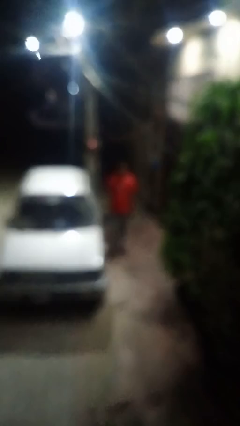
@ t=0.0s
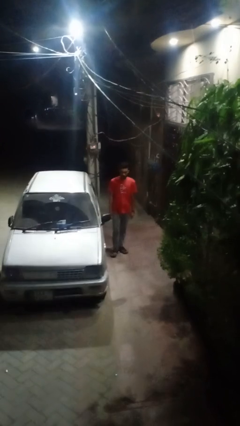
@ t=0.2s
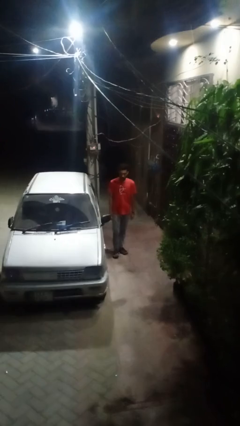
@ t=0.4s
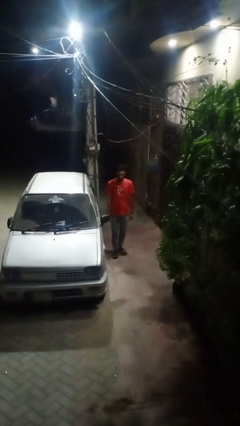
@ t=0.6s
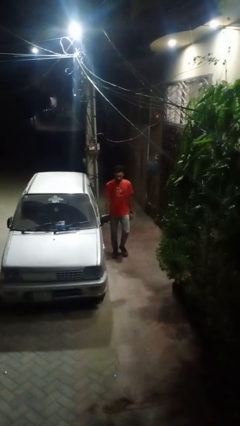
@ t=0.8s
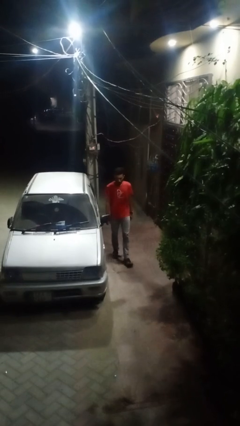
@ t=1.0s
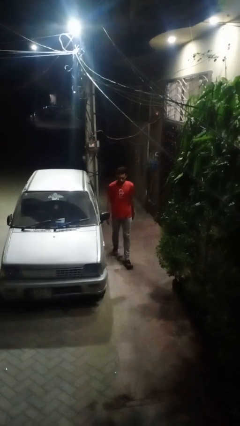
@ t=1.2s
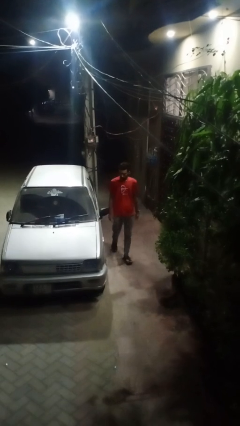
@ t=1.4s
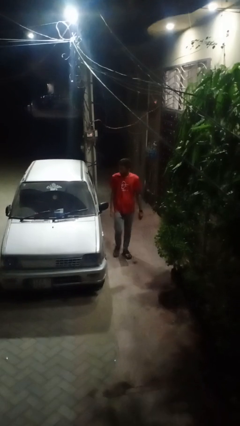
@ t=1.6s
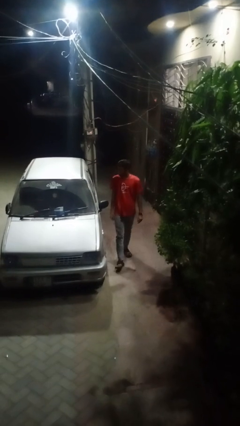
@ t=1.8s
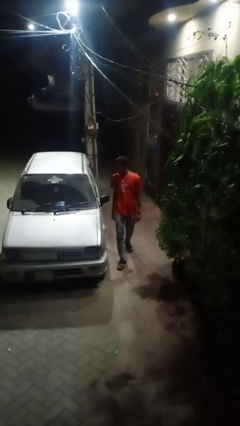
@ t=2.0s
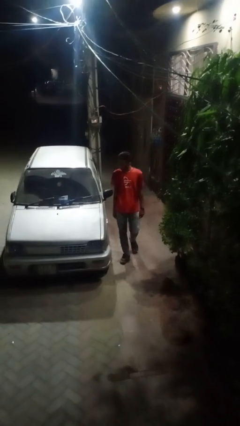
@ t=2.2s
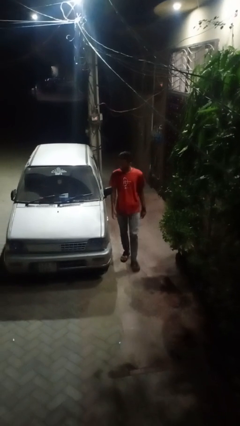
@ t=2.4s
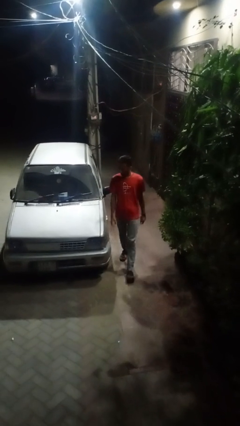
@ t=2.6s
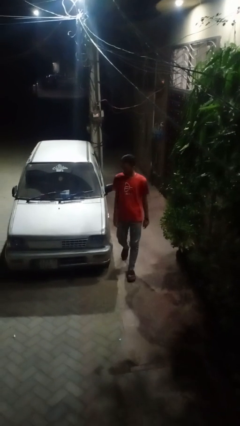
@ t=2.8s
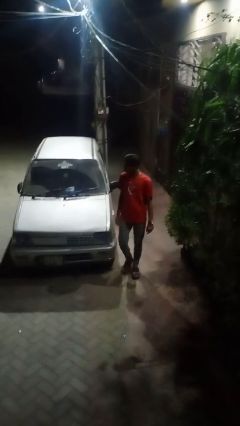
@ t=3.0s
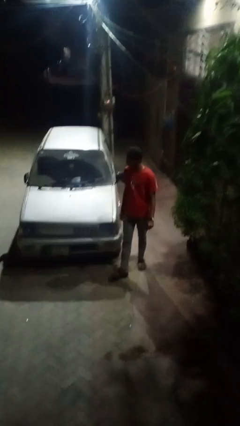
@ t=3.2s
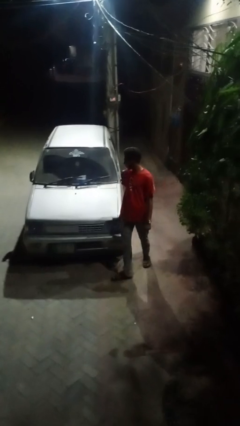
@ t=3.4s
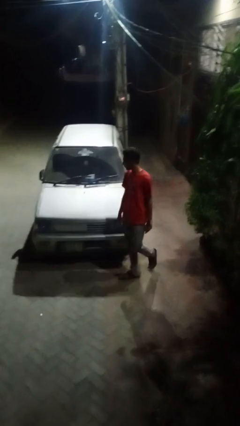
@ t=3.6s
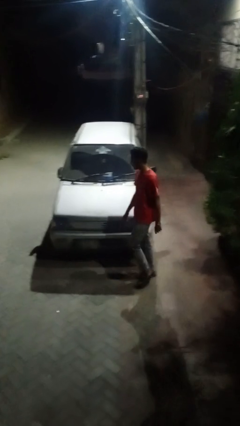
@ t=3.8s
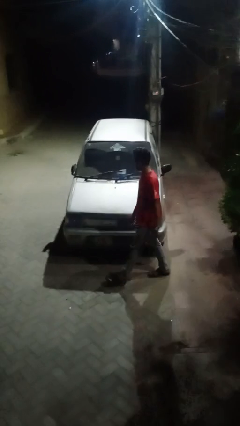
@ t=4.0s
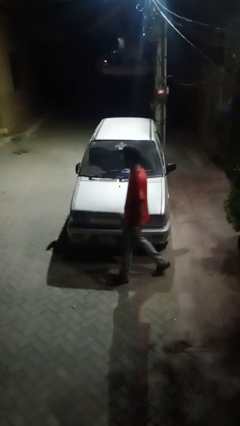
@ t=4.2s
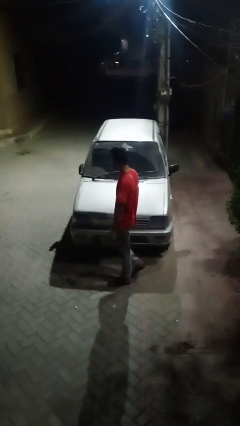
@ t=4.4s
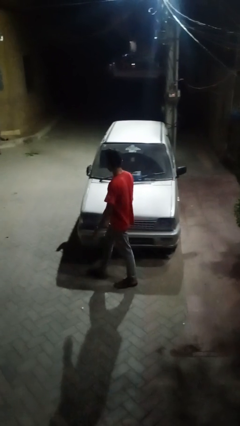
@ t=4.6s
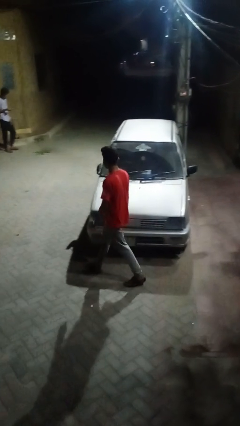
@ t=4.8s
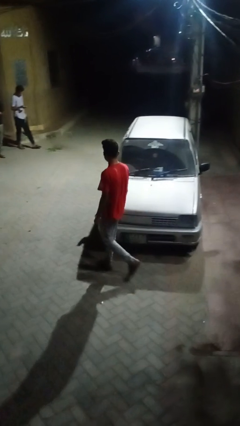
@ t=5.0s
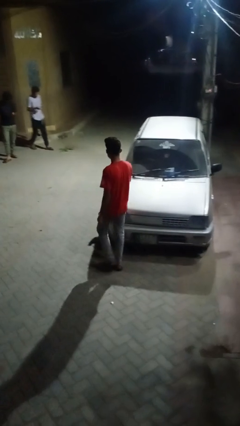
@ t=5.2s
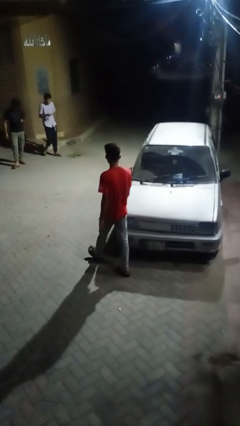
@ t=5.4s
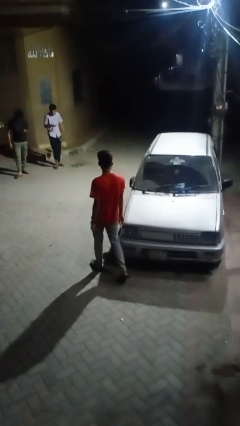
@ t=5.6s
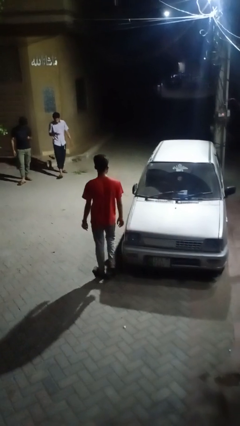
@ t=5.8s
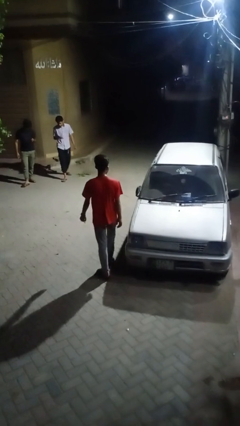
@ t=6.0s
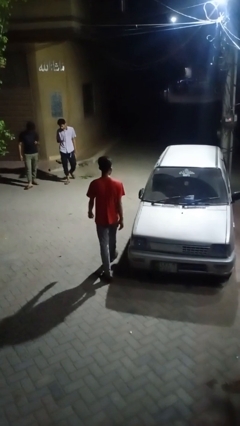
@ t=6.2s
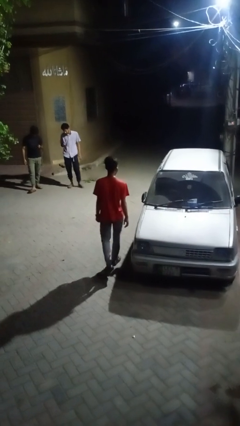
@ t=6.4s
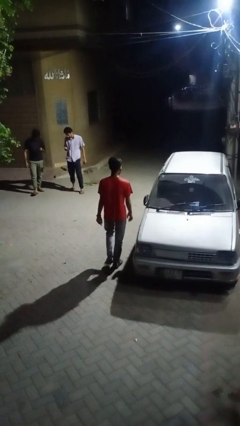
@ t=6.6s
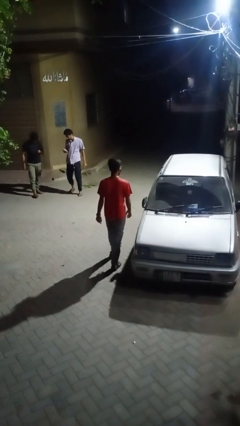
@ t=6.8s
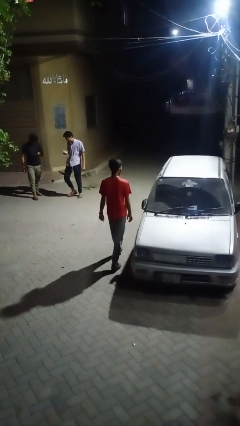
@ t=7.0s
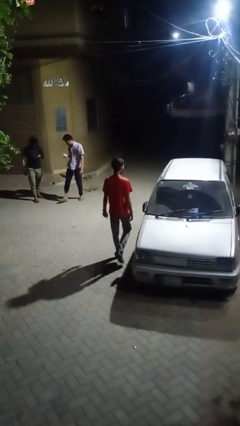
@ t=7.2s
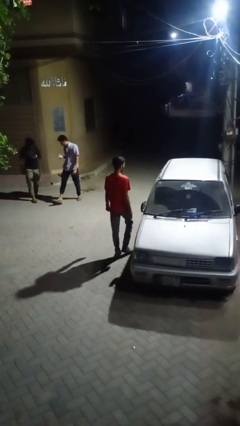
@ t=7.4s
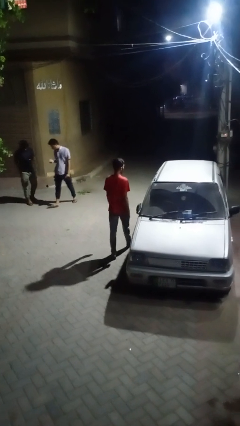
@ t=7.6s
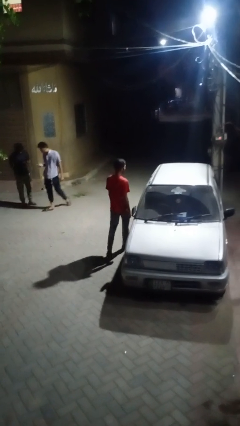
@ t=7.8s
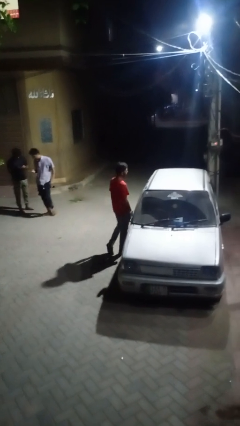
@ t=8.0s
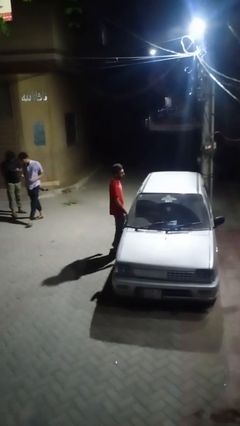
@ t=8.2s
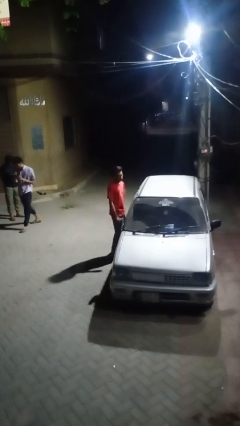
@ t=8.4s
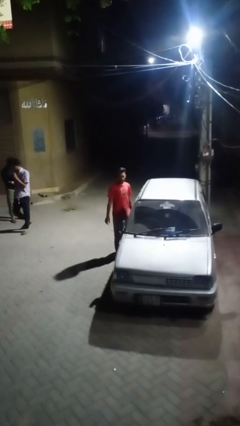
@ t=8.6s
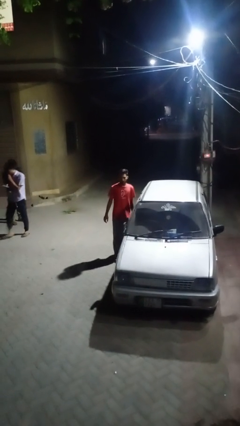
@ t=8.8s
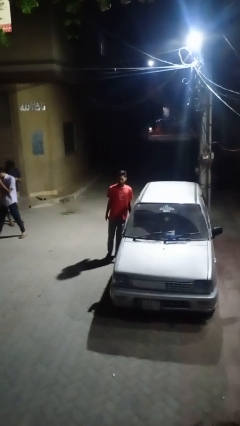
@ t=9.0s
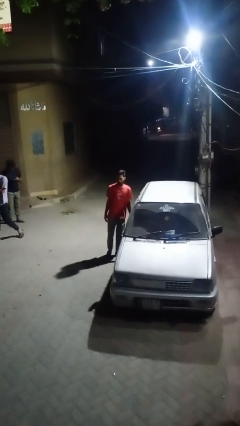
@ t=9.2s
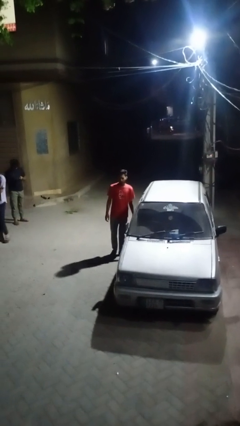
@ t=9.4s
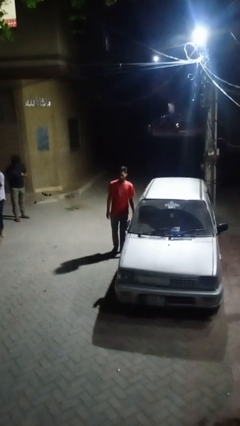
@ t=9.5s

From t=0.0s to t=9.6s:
person walks around car

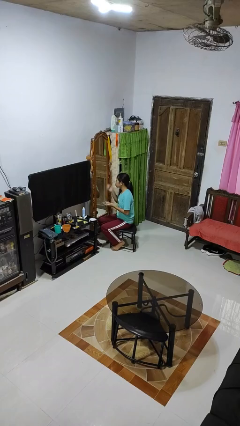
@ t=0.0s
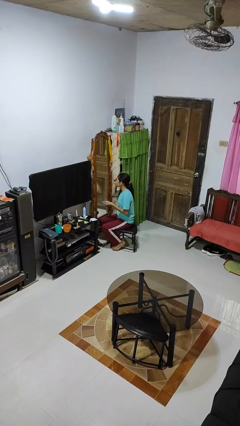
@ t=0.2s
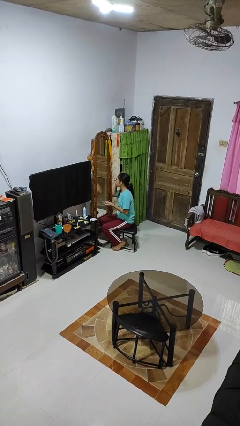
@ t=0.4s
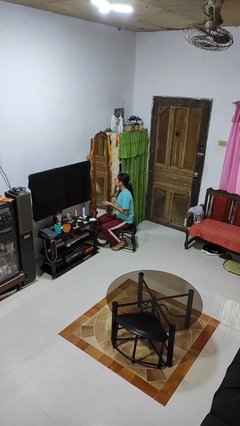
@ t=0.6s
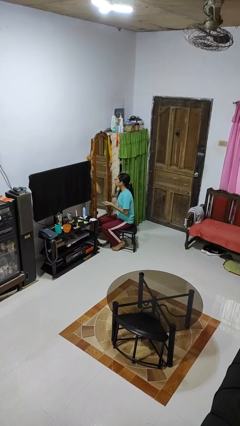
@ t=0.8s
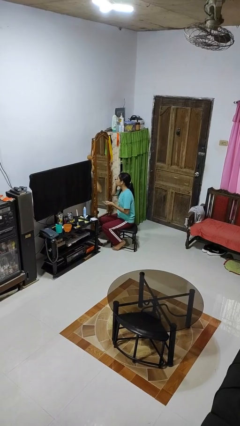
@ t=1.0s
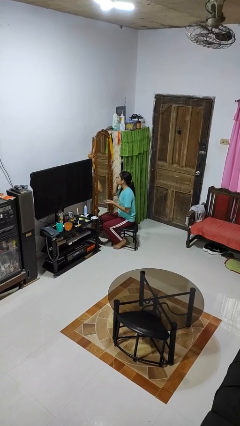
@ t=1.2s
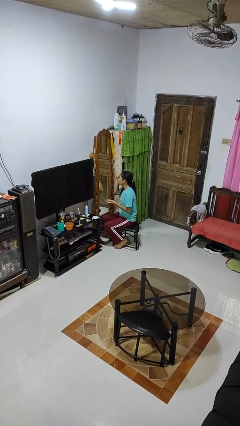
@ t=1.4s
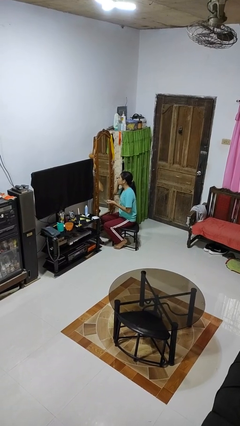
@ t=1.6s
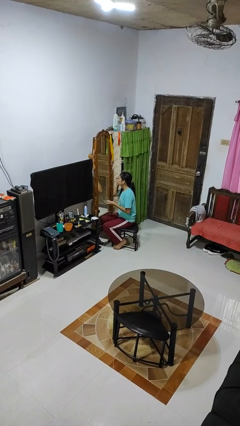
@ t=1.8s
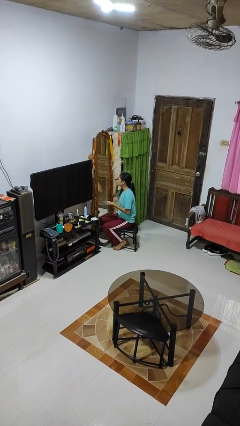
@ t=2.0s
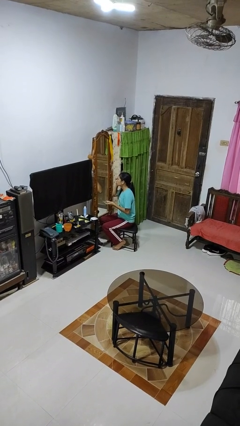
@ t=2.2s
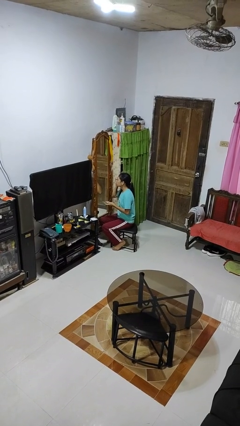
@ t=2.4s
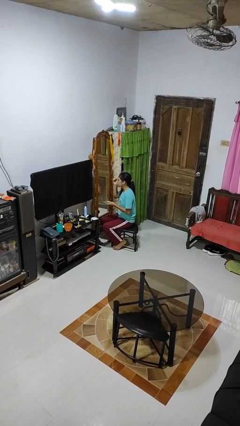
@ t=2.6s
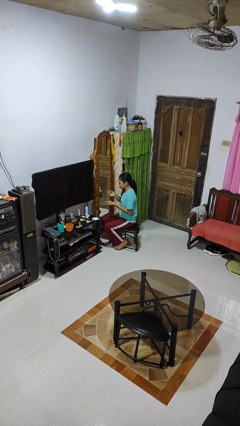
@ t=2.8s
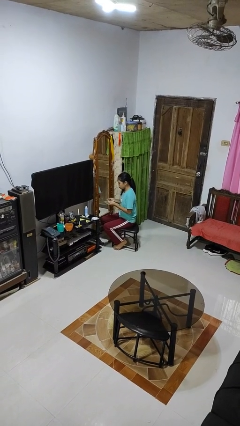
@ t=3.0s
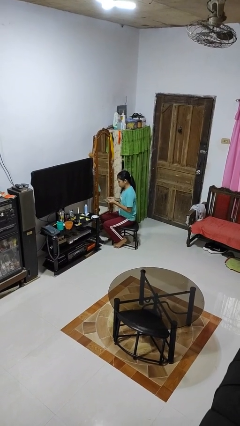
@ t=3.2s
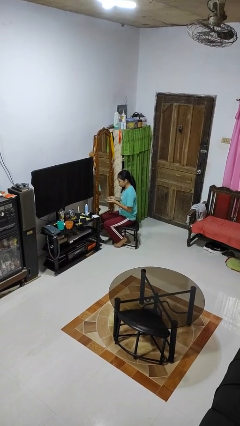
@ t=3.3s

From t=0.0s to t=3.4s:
person applies eye makeup

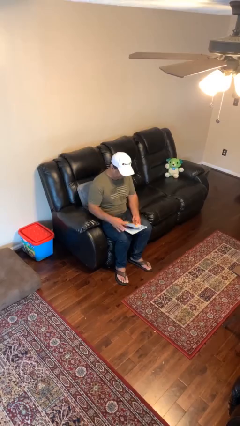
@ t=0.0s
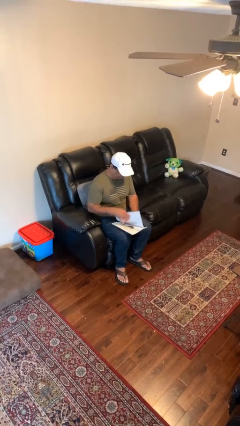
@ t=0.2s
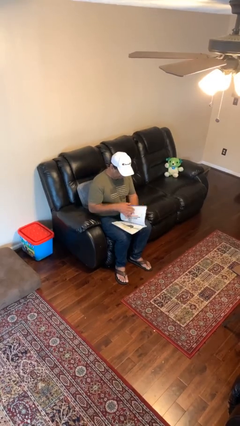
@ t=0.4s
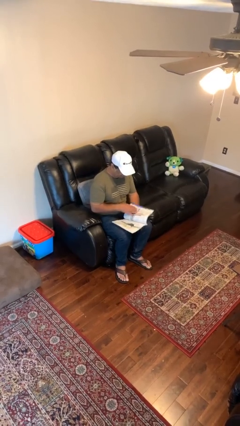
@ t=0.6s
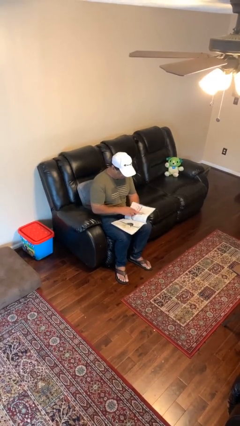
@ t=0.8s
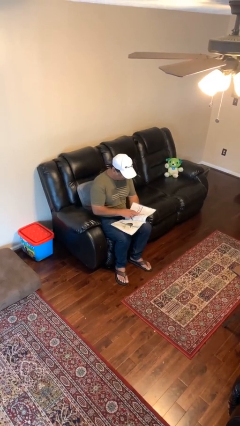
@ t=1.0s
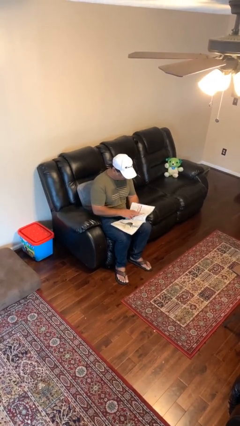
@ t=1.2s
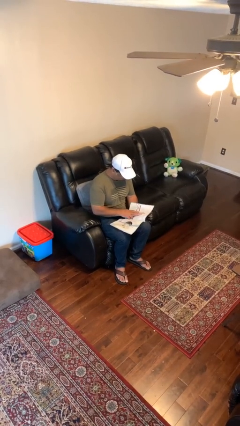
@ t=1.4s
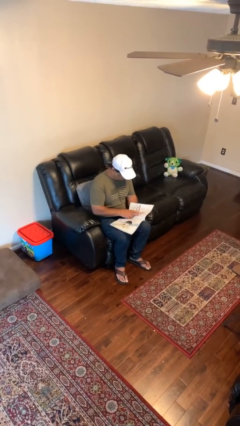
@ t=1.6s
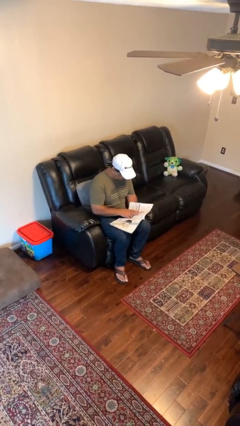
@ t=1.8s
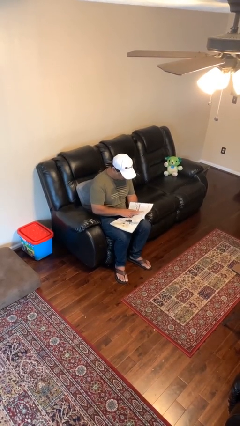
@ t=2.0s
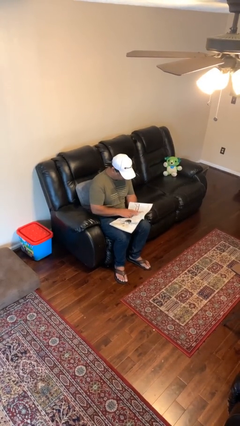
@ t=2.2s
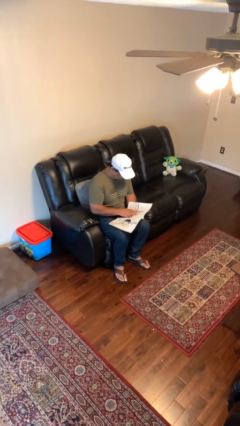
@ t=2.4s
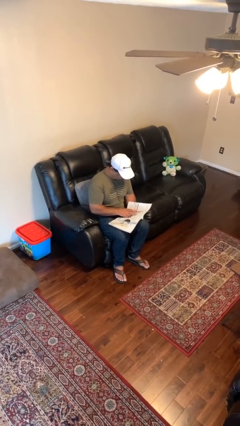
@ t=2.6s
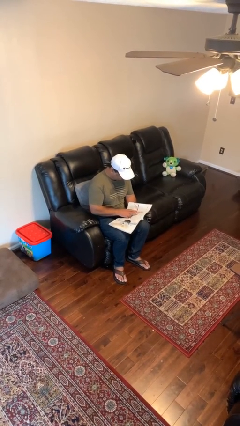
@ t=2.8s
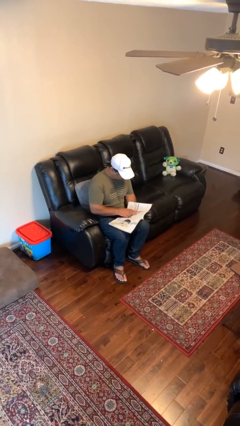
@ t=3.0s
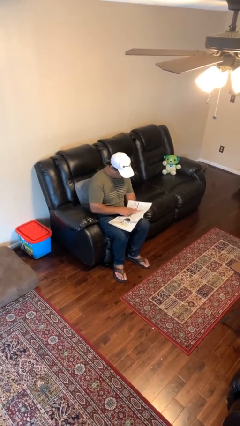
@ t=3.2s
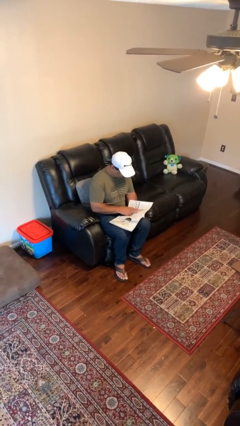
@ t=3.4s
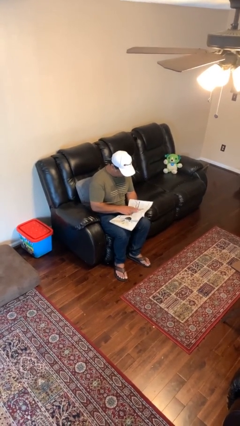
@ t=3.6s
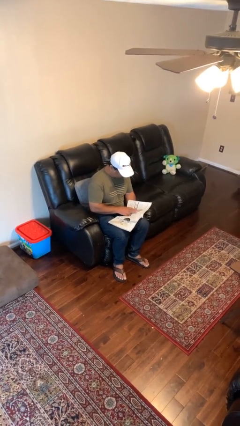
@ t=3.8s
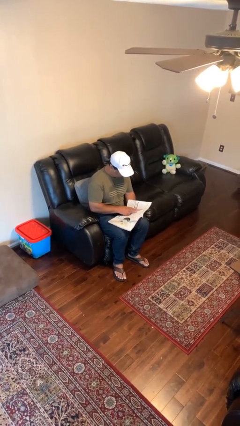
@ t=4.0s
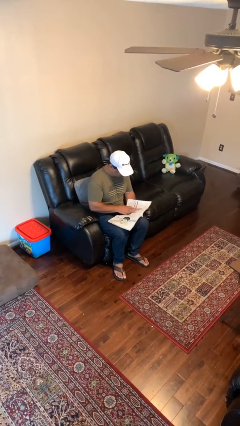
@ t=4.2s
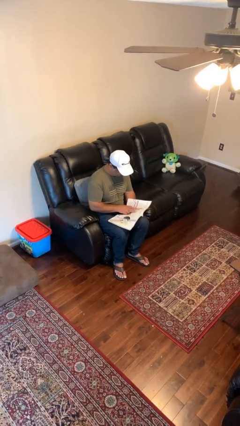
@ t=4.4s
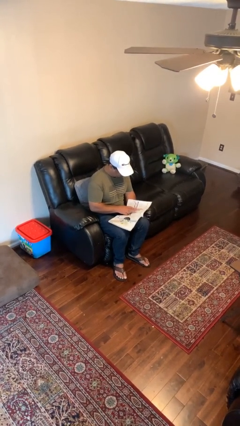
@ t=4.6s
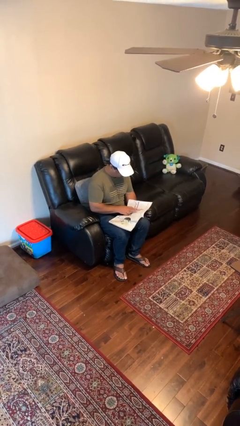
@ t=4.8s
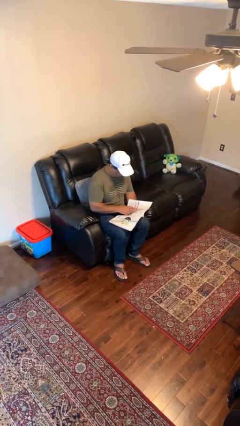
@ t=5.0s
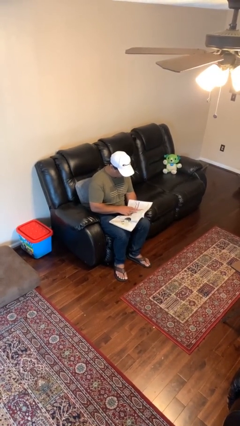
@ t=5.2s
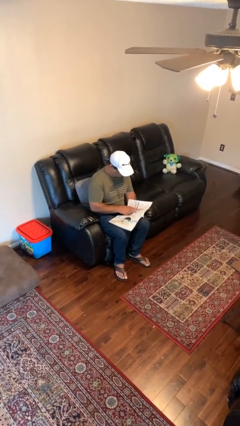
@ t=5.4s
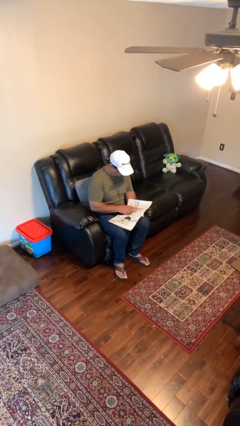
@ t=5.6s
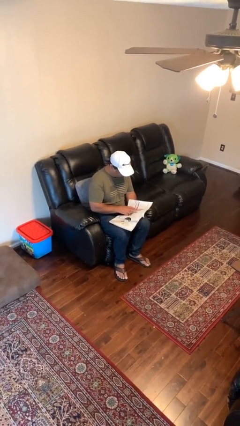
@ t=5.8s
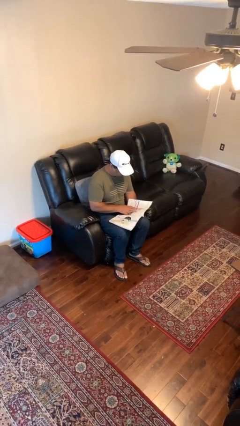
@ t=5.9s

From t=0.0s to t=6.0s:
person reads document
